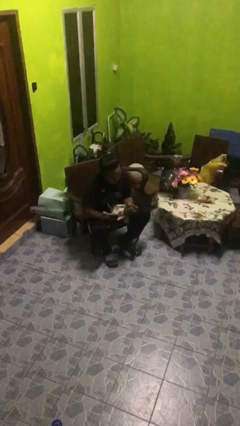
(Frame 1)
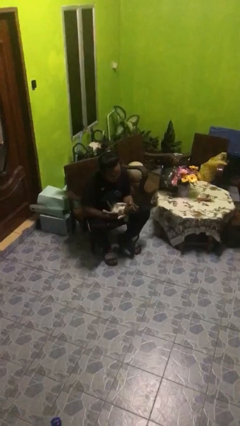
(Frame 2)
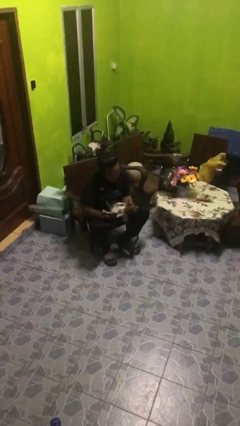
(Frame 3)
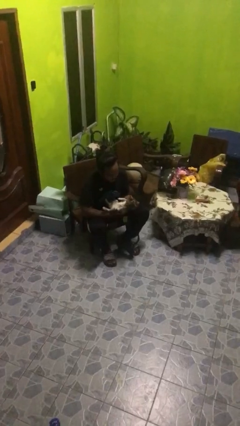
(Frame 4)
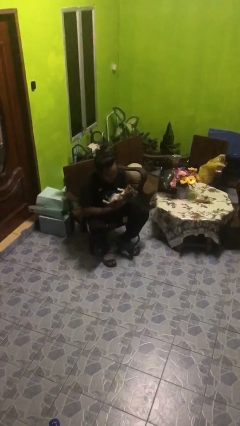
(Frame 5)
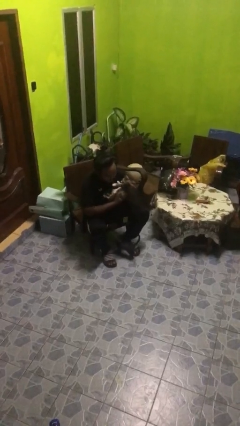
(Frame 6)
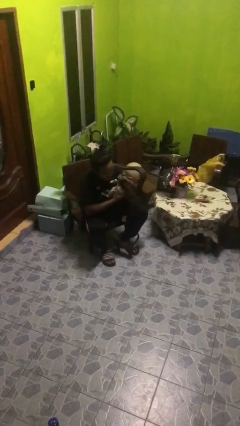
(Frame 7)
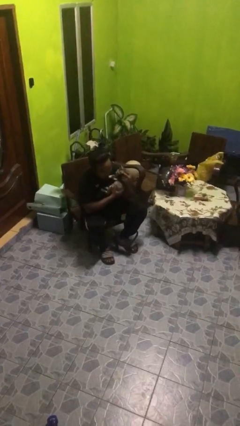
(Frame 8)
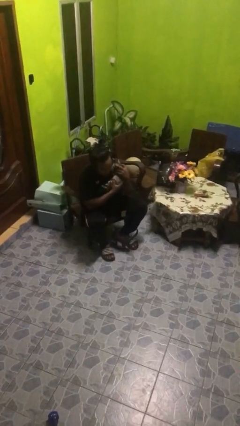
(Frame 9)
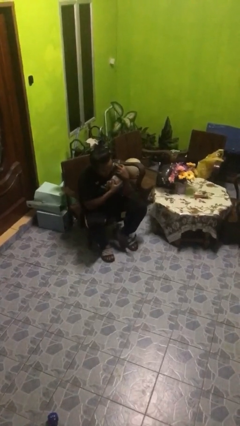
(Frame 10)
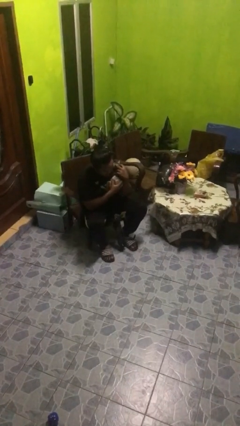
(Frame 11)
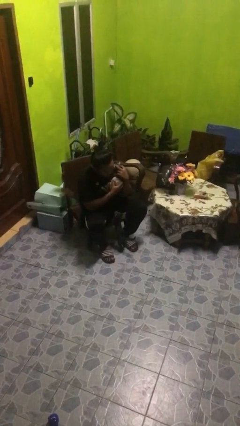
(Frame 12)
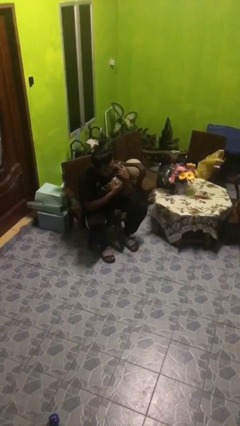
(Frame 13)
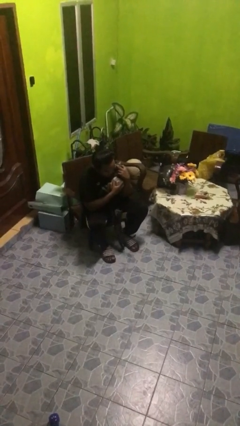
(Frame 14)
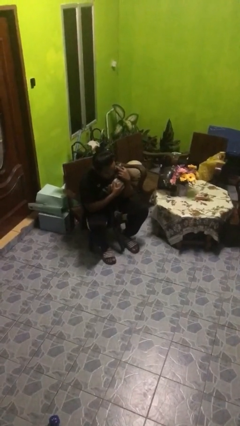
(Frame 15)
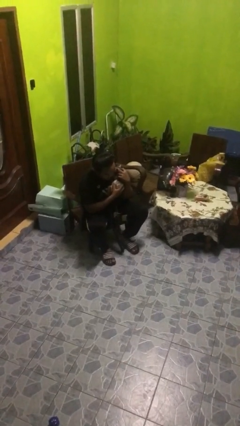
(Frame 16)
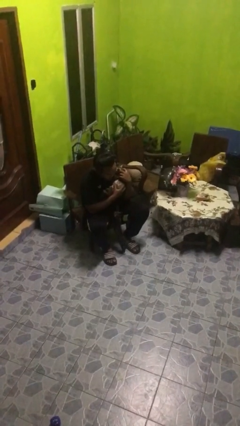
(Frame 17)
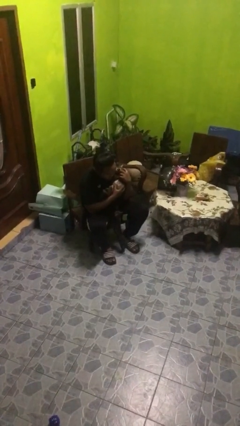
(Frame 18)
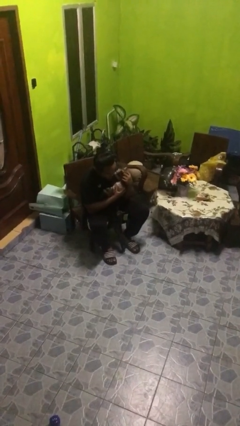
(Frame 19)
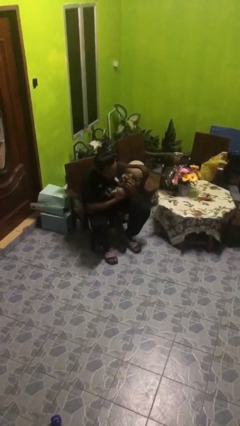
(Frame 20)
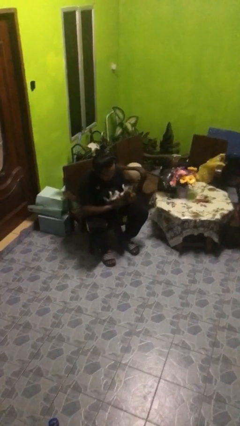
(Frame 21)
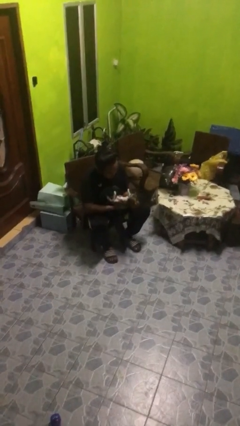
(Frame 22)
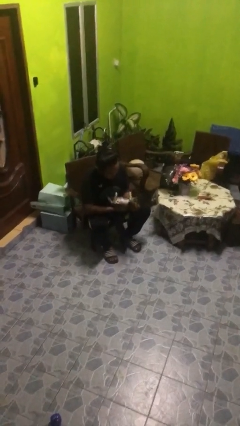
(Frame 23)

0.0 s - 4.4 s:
person hugs cat

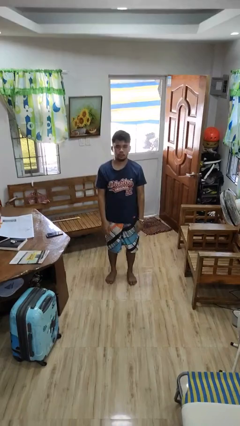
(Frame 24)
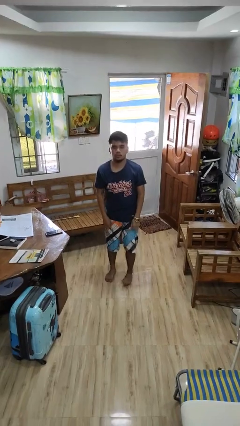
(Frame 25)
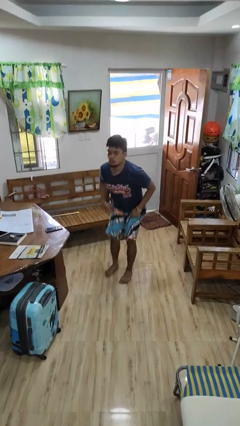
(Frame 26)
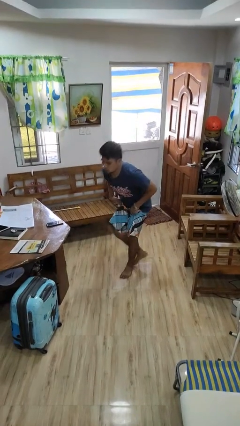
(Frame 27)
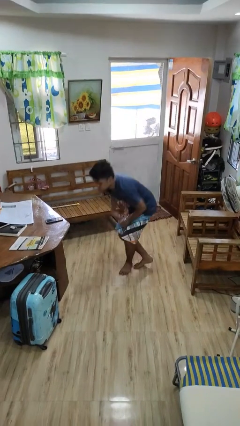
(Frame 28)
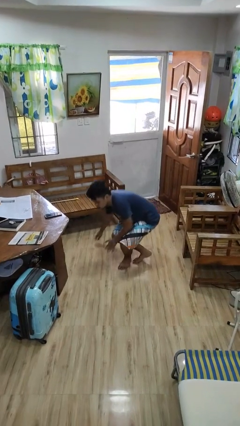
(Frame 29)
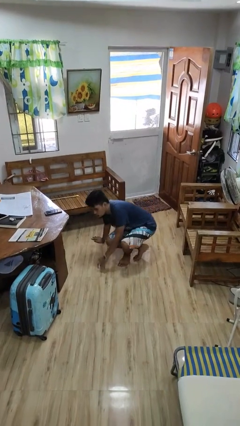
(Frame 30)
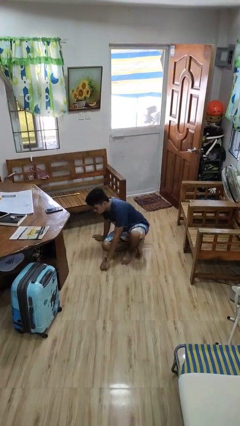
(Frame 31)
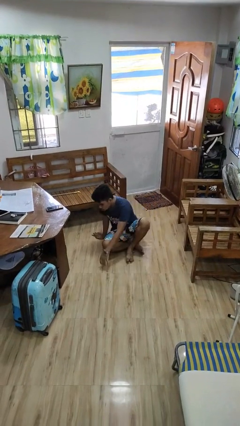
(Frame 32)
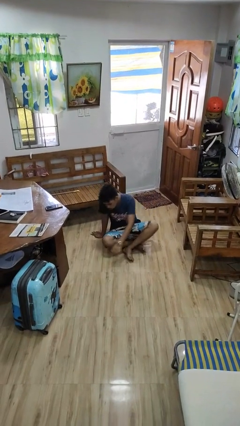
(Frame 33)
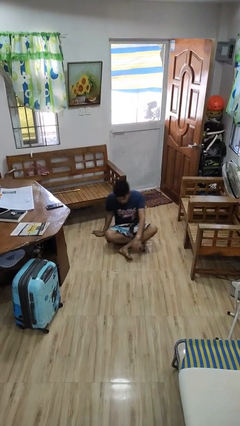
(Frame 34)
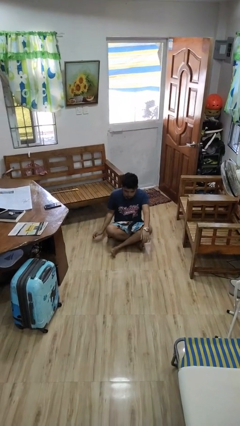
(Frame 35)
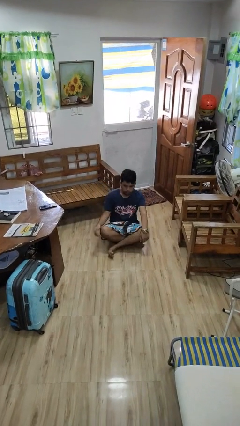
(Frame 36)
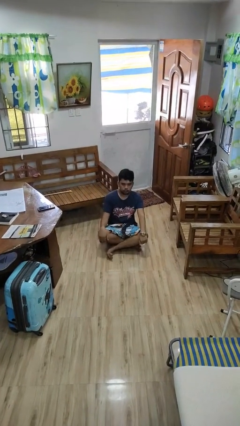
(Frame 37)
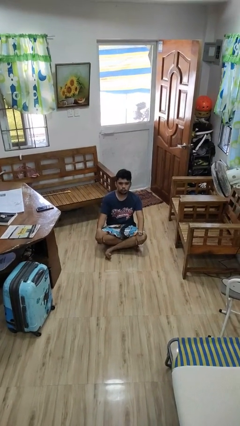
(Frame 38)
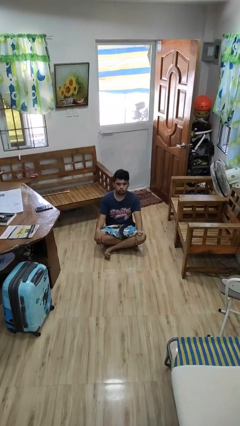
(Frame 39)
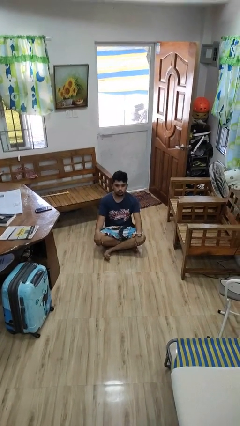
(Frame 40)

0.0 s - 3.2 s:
person sits crisscross

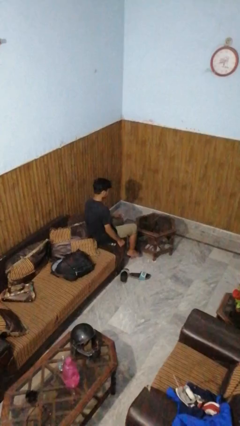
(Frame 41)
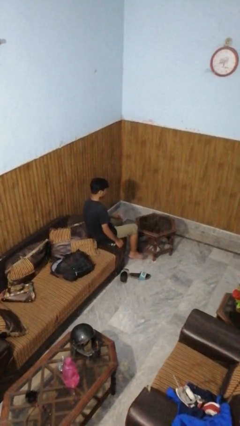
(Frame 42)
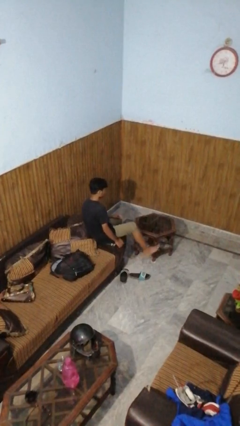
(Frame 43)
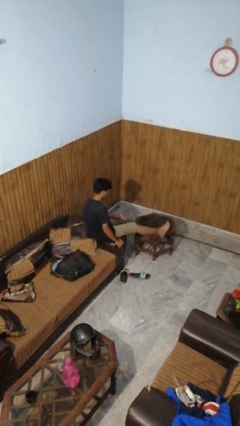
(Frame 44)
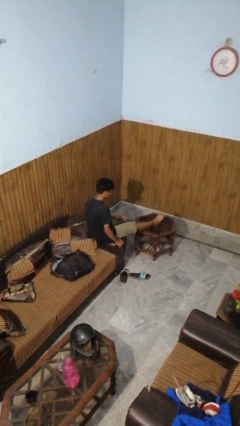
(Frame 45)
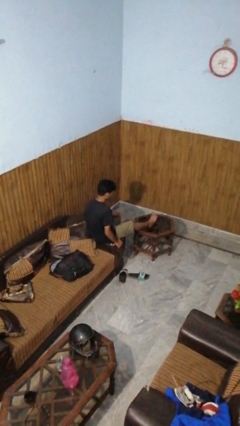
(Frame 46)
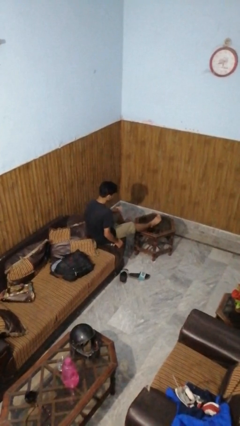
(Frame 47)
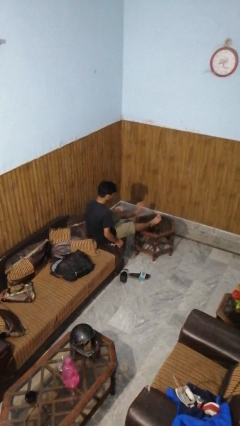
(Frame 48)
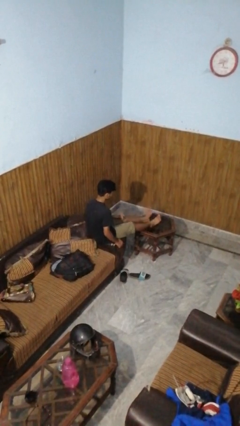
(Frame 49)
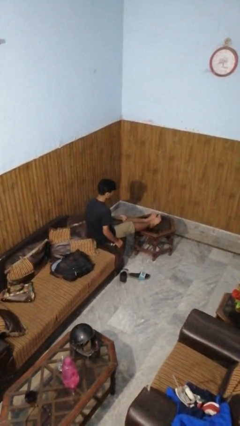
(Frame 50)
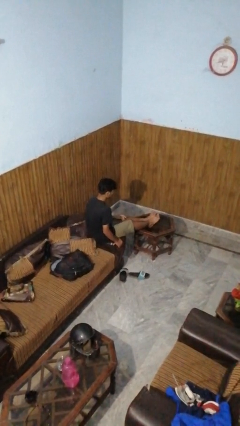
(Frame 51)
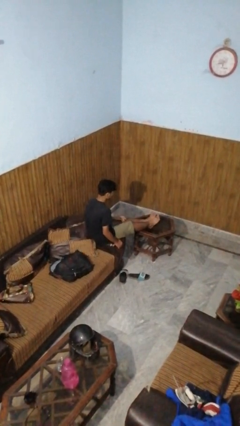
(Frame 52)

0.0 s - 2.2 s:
person puts feet up

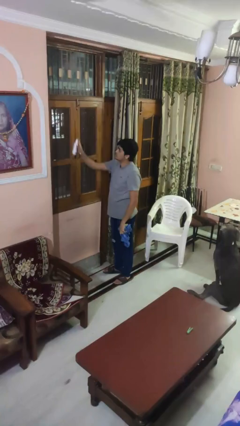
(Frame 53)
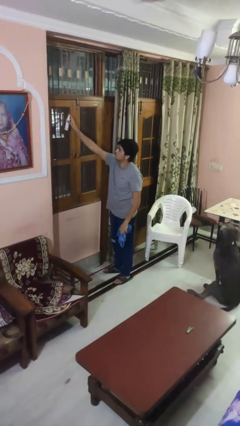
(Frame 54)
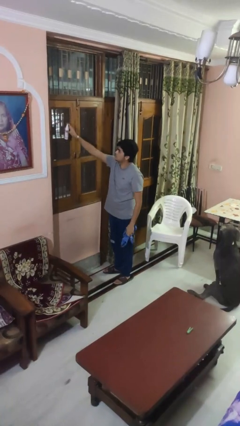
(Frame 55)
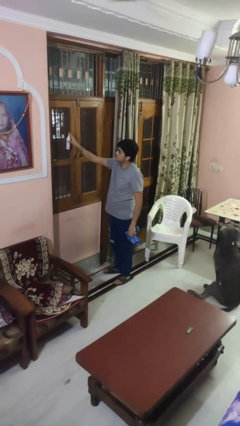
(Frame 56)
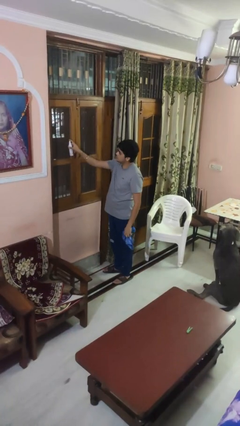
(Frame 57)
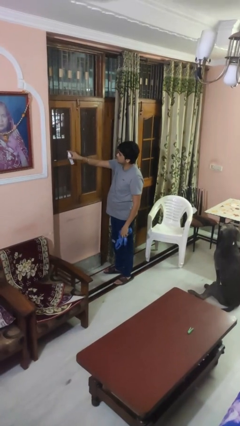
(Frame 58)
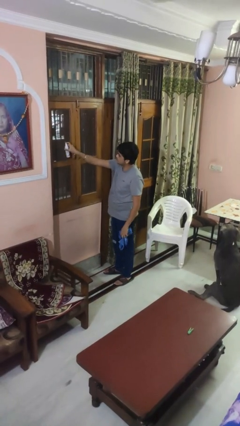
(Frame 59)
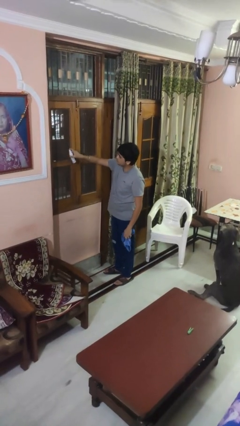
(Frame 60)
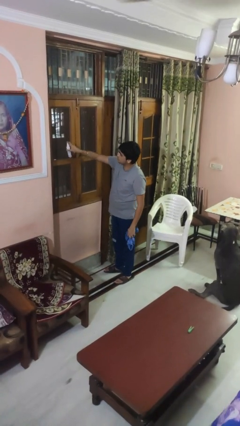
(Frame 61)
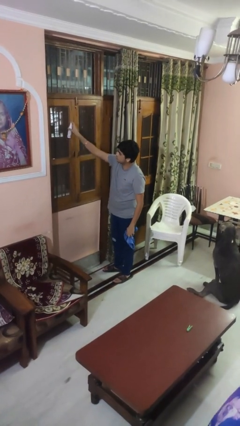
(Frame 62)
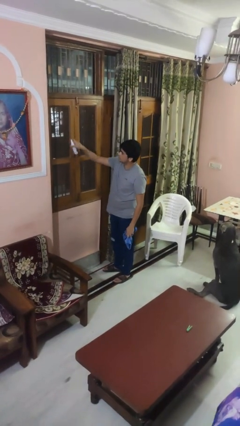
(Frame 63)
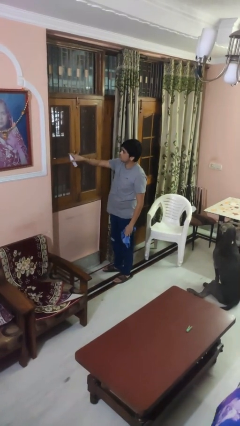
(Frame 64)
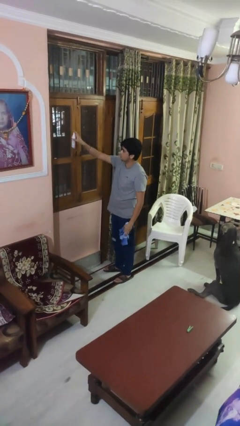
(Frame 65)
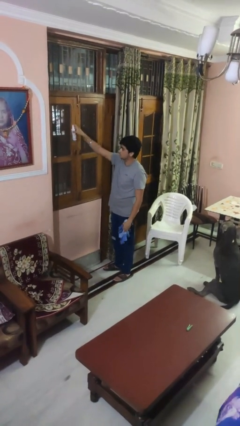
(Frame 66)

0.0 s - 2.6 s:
person sprays from bottle

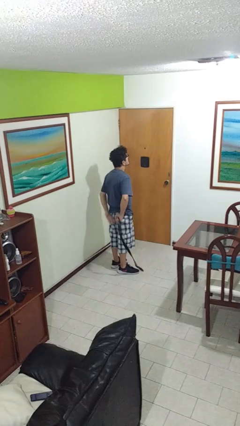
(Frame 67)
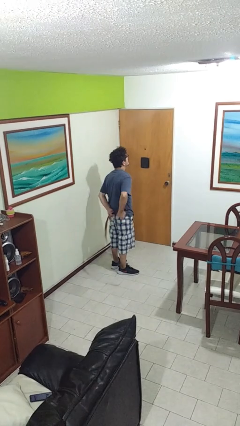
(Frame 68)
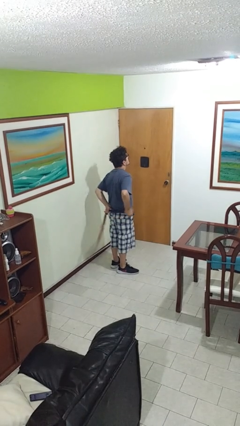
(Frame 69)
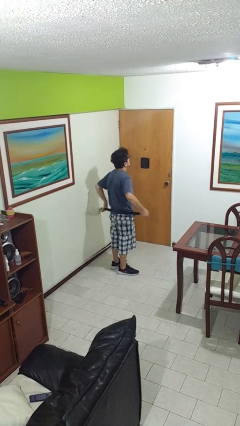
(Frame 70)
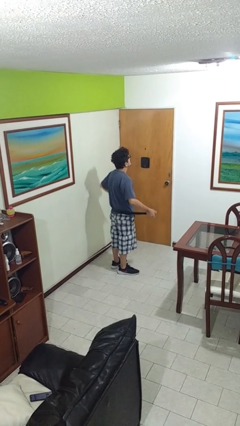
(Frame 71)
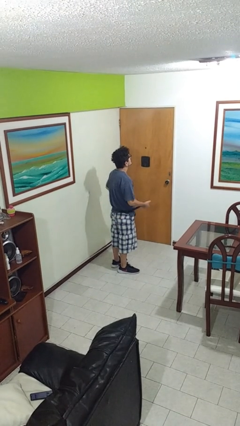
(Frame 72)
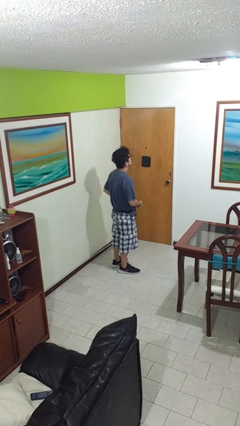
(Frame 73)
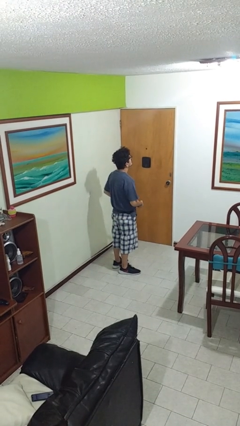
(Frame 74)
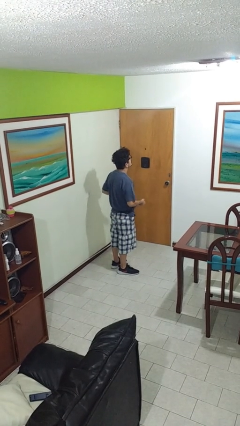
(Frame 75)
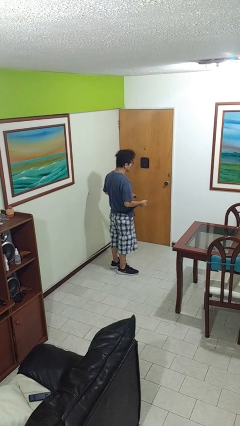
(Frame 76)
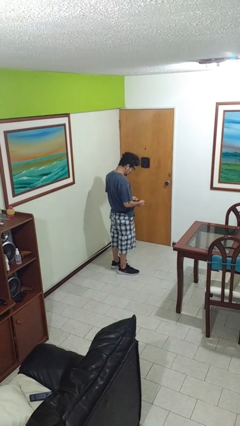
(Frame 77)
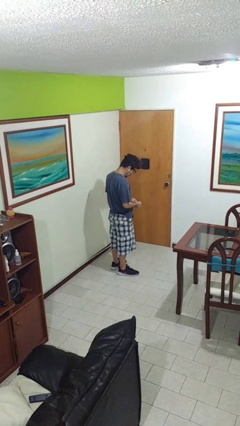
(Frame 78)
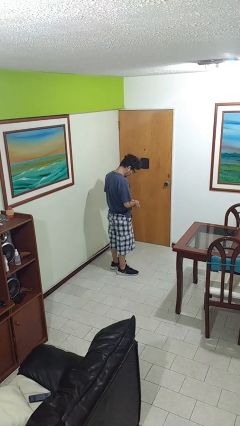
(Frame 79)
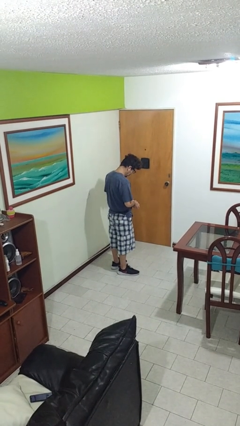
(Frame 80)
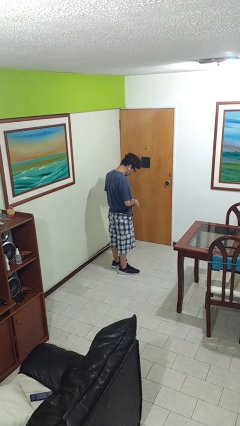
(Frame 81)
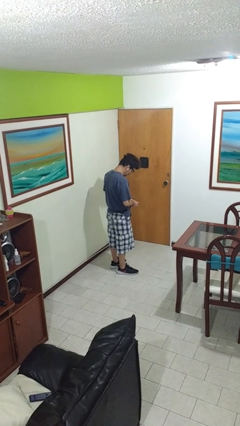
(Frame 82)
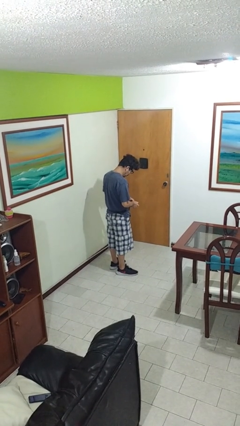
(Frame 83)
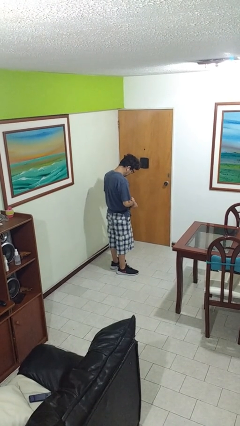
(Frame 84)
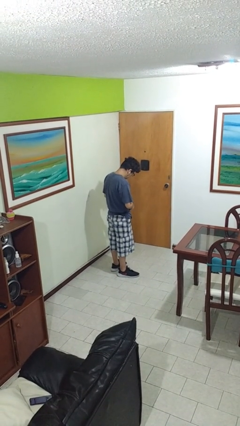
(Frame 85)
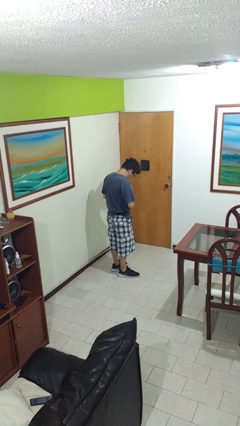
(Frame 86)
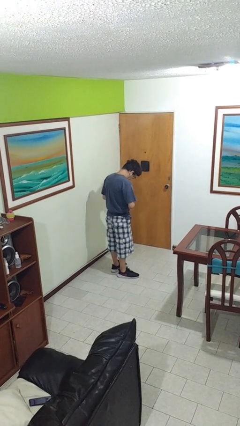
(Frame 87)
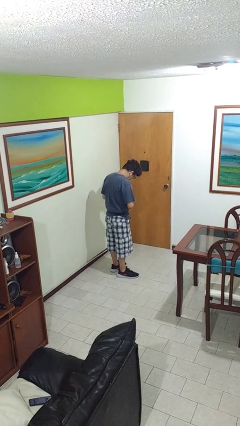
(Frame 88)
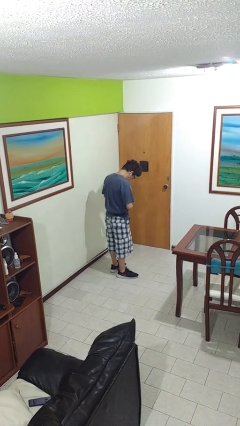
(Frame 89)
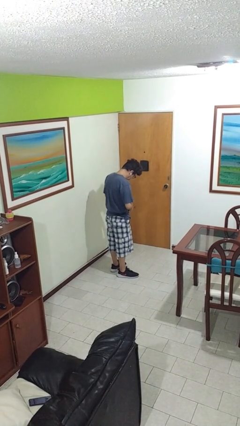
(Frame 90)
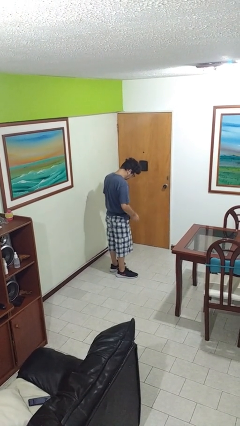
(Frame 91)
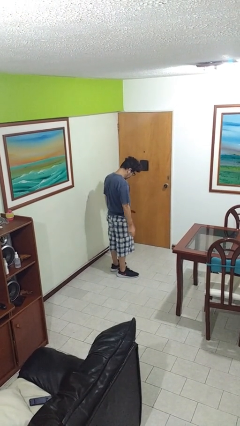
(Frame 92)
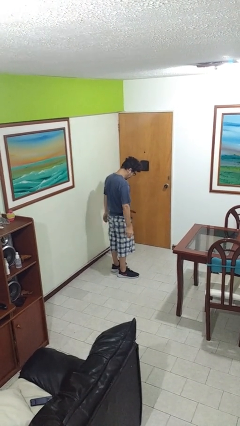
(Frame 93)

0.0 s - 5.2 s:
person puts on belt
